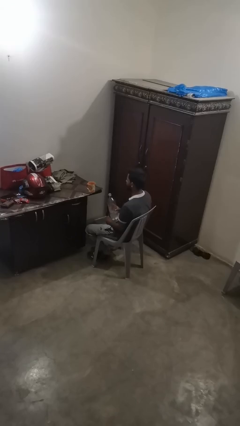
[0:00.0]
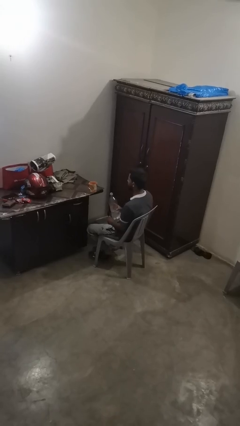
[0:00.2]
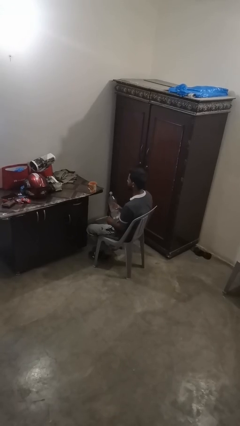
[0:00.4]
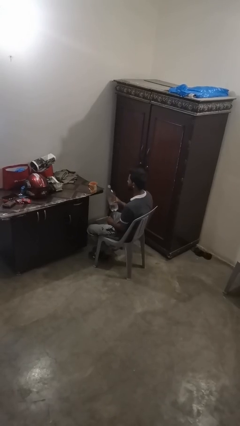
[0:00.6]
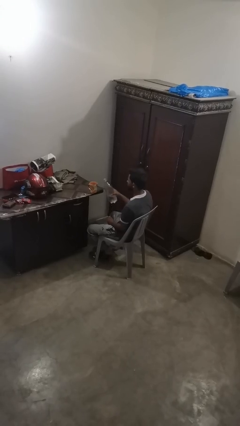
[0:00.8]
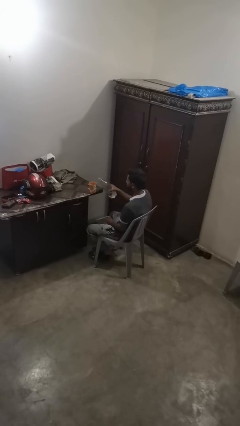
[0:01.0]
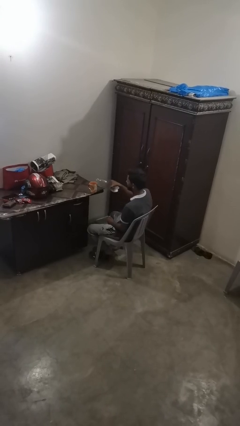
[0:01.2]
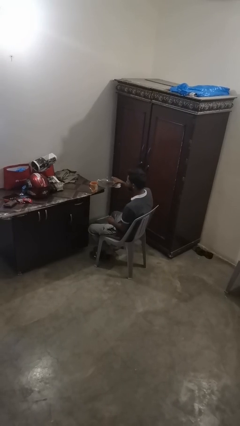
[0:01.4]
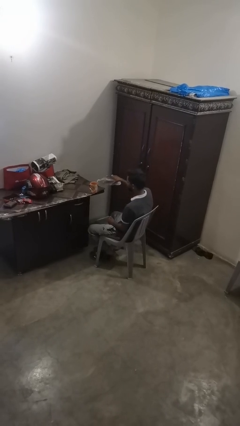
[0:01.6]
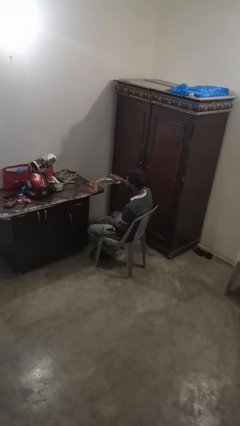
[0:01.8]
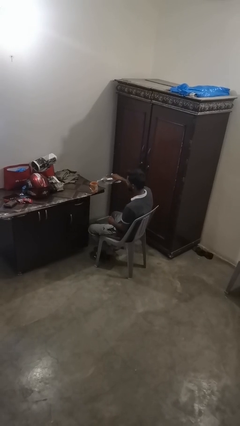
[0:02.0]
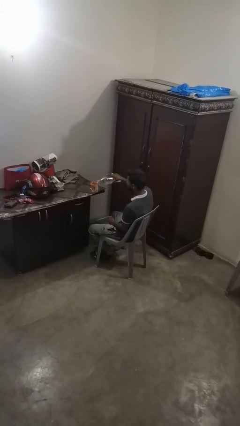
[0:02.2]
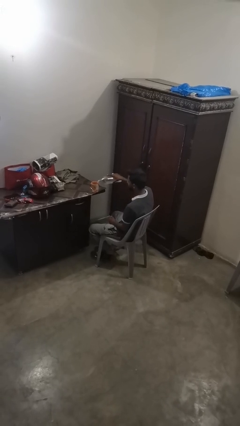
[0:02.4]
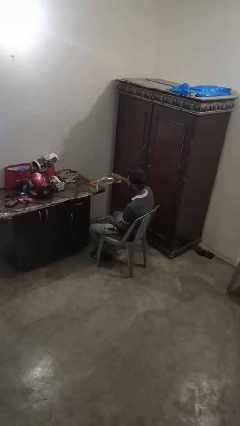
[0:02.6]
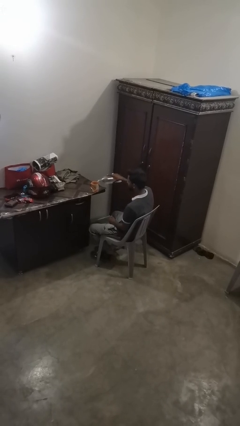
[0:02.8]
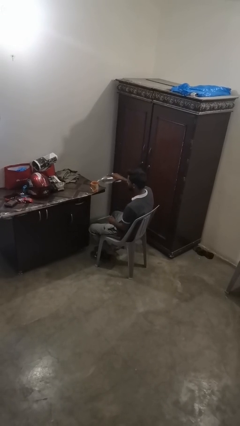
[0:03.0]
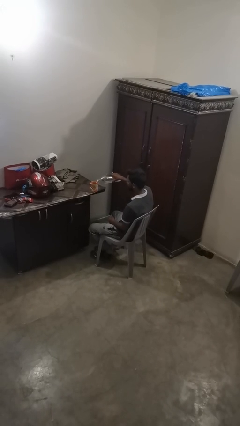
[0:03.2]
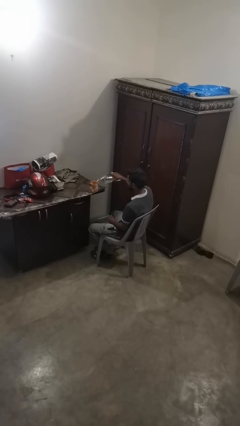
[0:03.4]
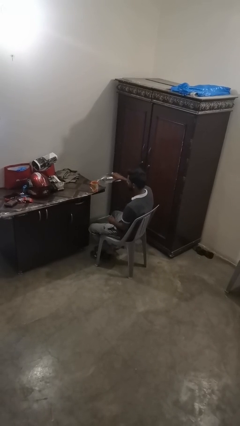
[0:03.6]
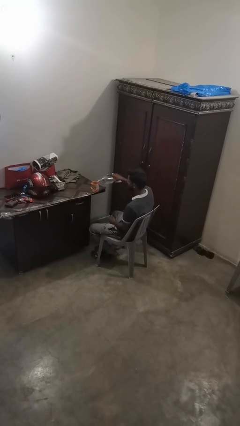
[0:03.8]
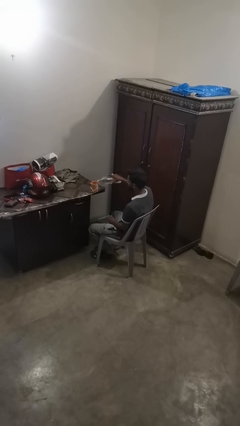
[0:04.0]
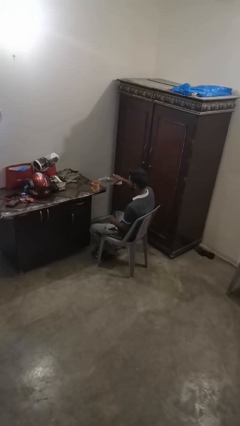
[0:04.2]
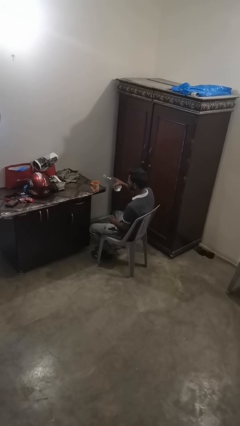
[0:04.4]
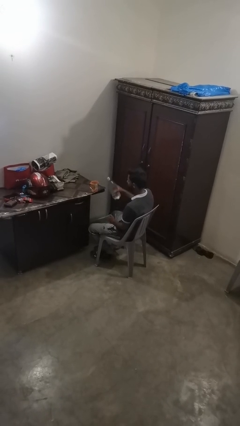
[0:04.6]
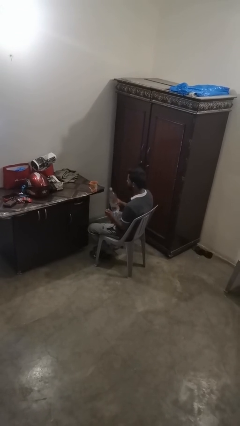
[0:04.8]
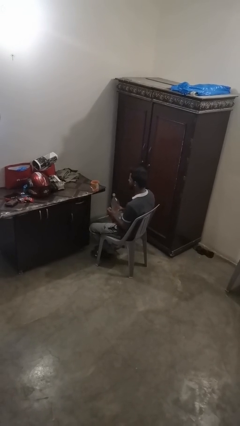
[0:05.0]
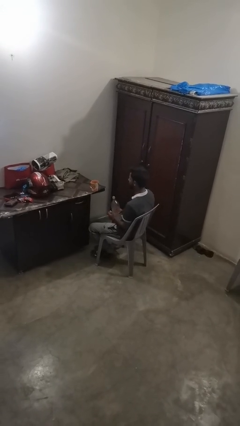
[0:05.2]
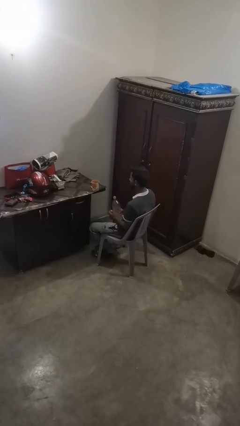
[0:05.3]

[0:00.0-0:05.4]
person pours liquid into cup

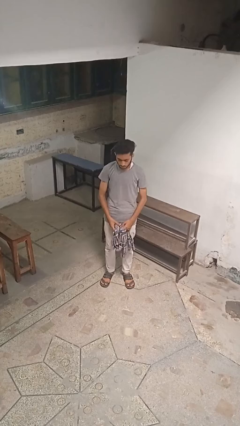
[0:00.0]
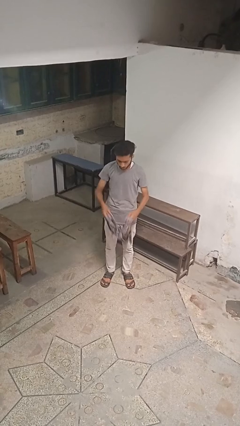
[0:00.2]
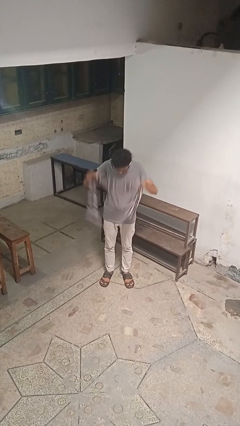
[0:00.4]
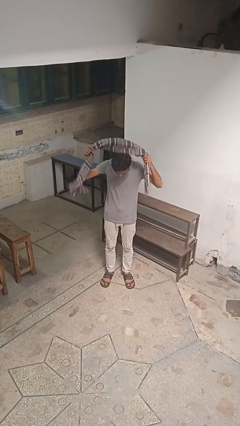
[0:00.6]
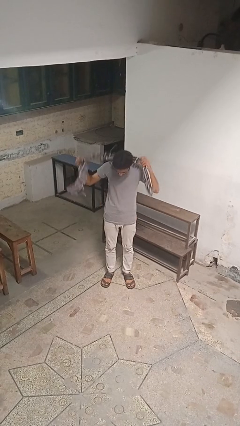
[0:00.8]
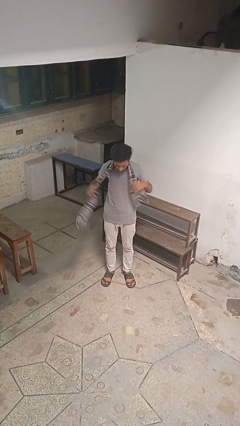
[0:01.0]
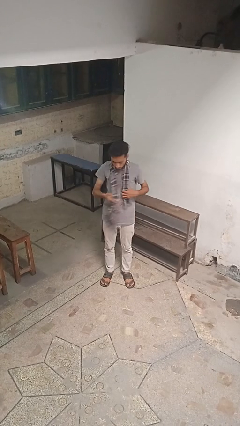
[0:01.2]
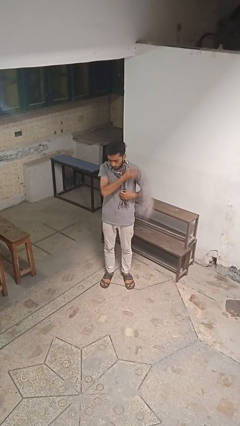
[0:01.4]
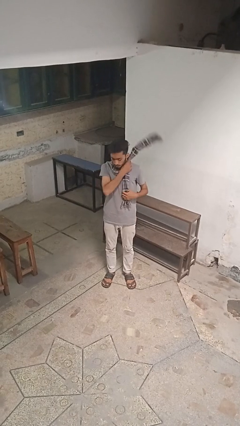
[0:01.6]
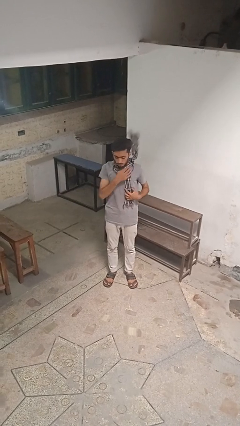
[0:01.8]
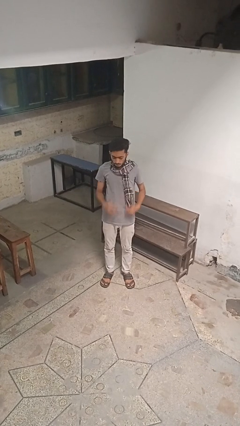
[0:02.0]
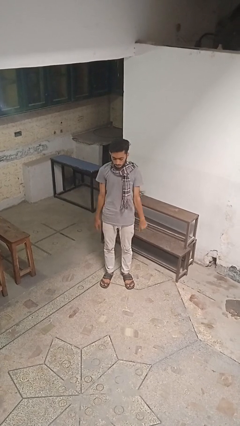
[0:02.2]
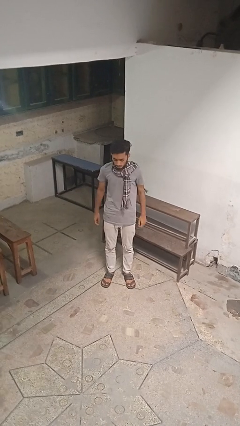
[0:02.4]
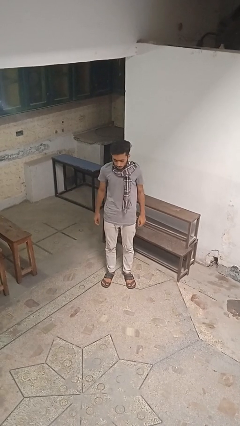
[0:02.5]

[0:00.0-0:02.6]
person puts on scarf

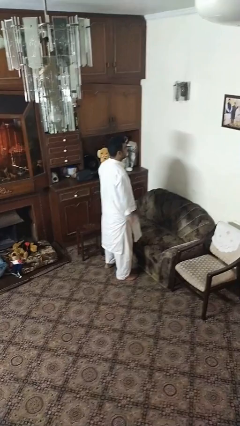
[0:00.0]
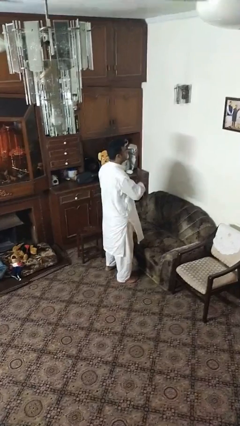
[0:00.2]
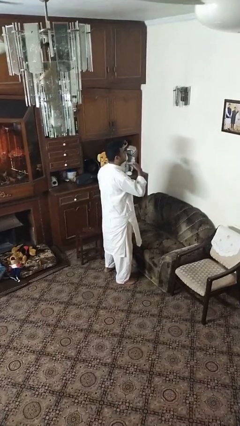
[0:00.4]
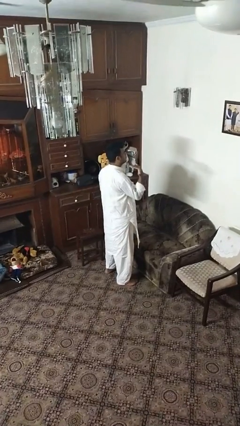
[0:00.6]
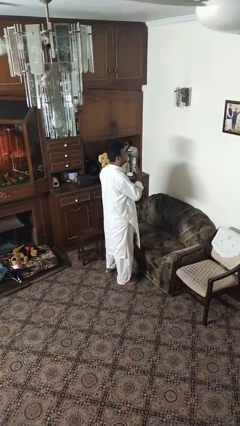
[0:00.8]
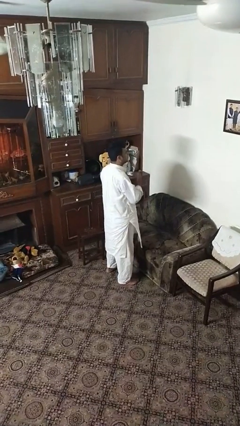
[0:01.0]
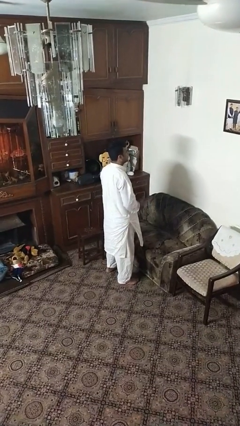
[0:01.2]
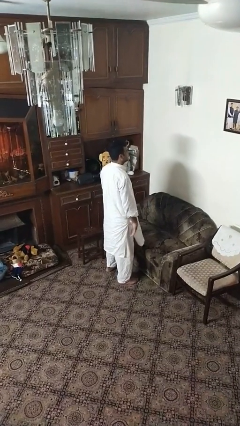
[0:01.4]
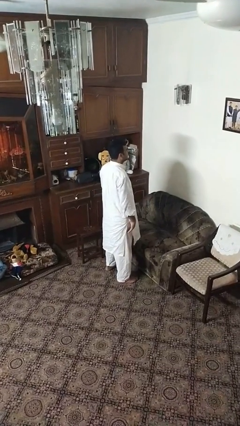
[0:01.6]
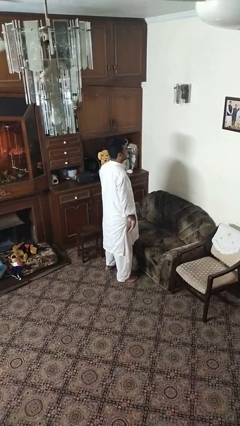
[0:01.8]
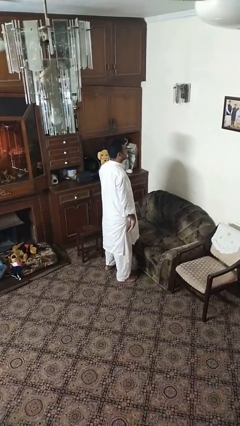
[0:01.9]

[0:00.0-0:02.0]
person gestures cut

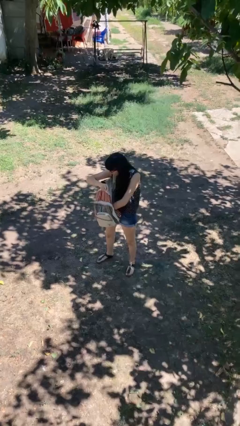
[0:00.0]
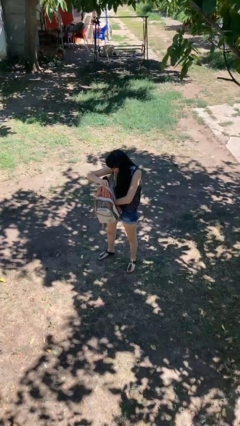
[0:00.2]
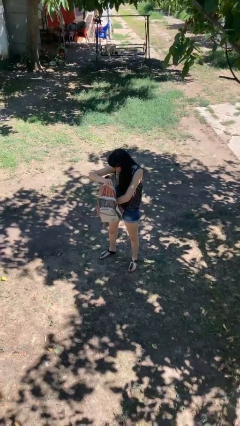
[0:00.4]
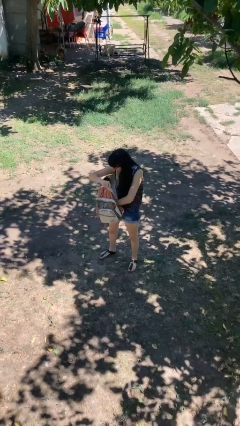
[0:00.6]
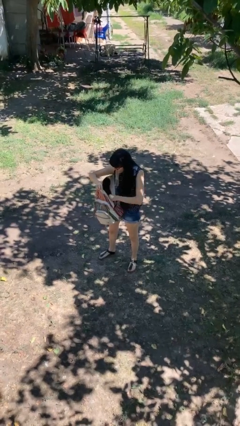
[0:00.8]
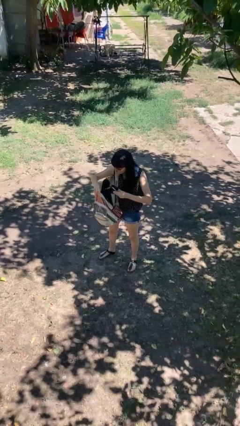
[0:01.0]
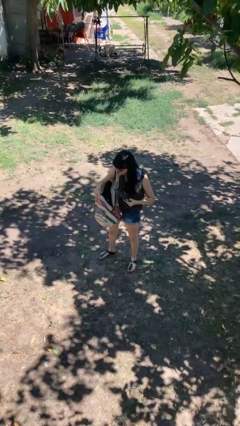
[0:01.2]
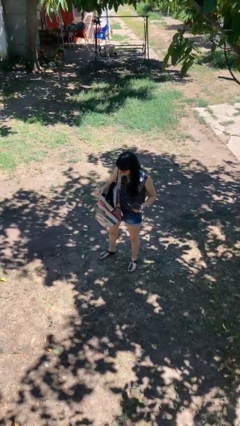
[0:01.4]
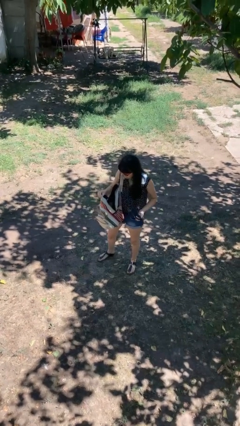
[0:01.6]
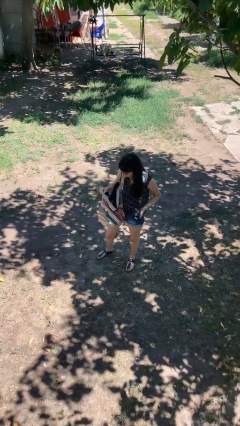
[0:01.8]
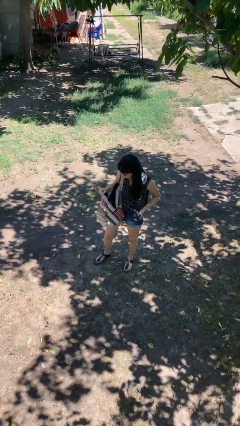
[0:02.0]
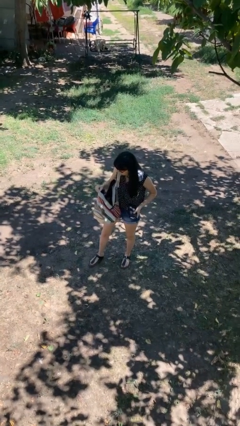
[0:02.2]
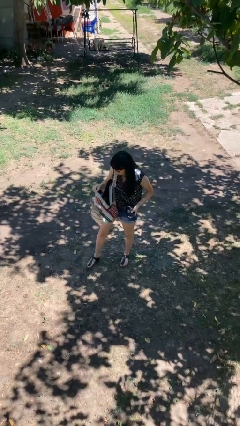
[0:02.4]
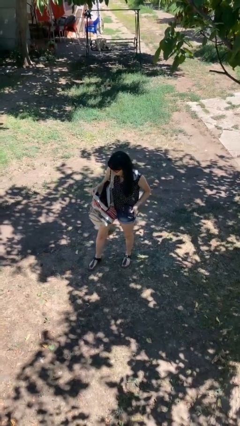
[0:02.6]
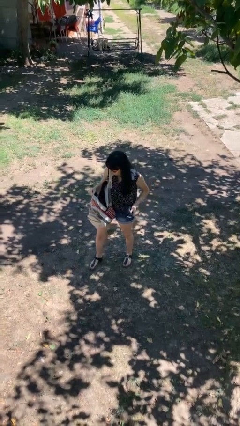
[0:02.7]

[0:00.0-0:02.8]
person takes object from backpack

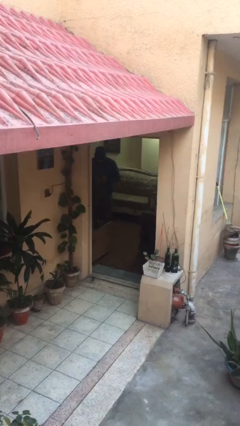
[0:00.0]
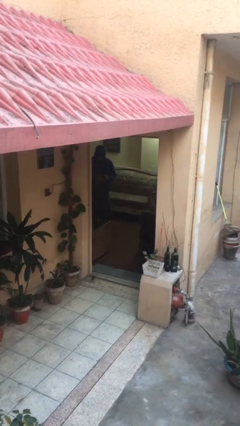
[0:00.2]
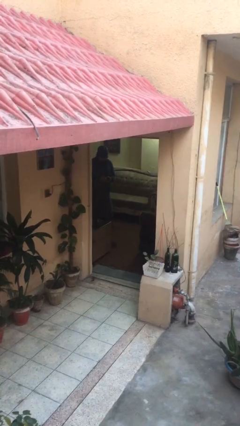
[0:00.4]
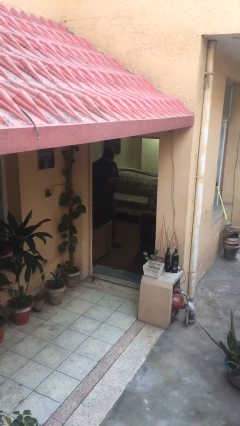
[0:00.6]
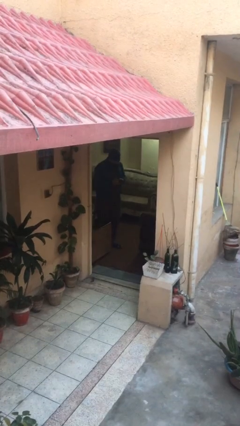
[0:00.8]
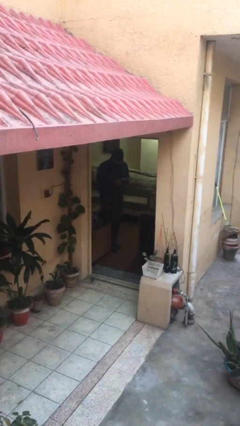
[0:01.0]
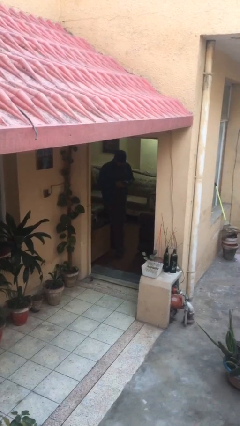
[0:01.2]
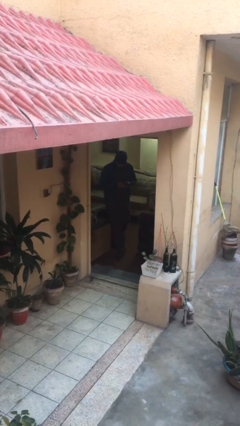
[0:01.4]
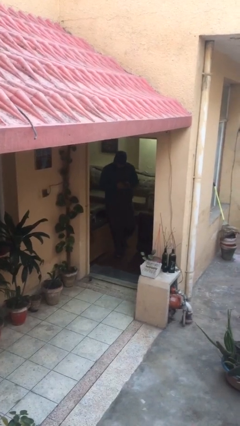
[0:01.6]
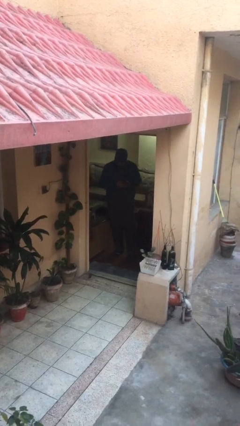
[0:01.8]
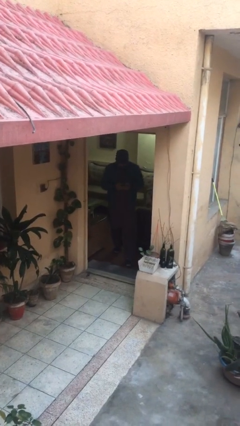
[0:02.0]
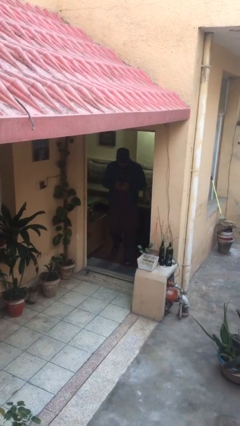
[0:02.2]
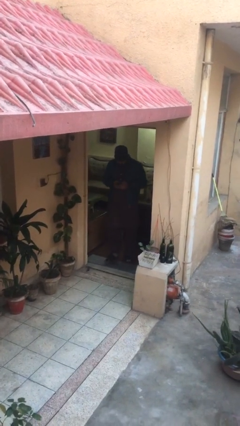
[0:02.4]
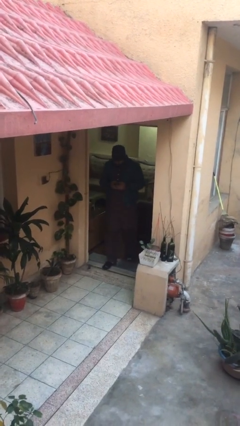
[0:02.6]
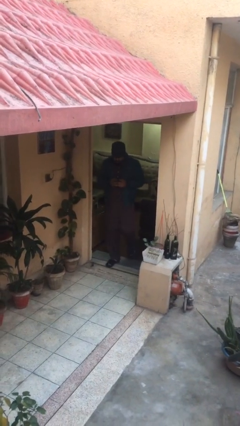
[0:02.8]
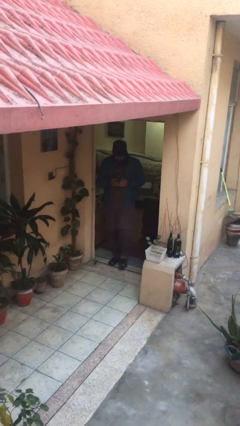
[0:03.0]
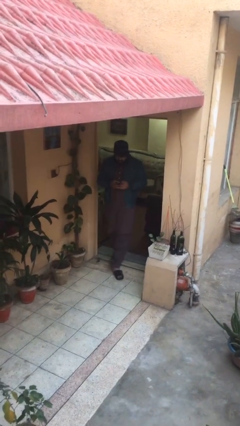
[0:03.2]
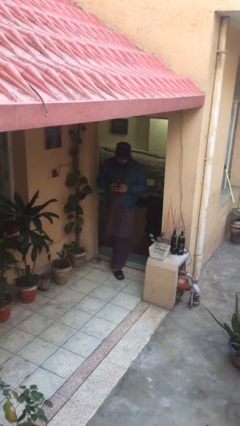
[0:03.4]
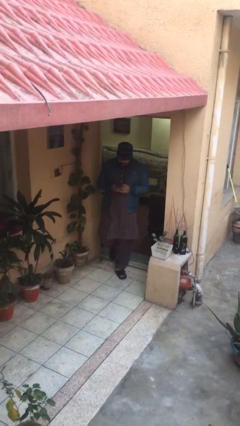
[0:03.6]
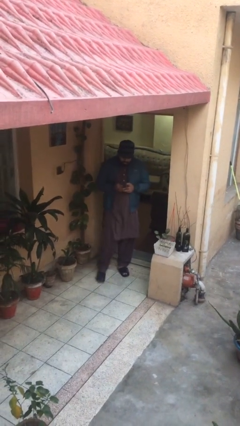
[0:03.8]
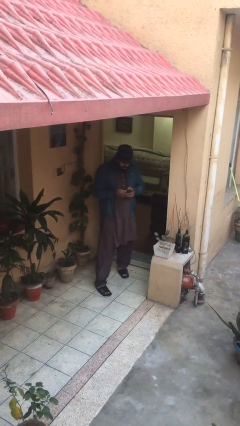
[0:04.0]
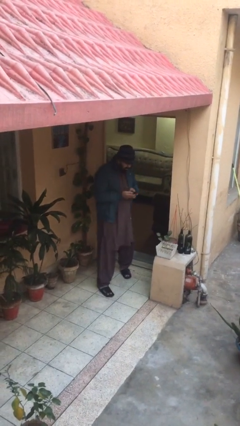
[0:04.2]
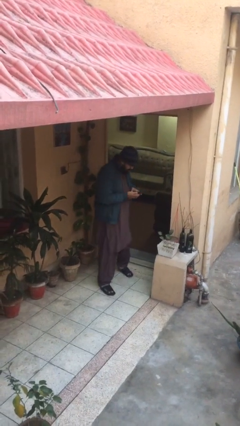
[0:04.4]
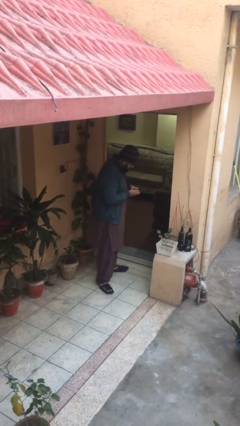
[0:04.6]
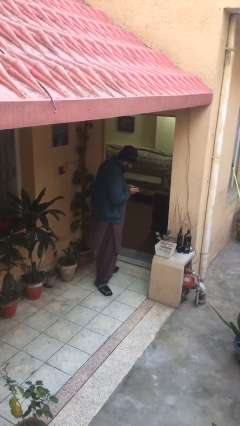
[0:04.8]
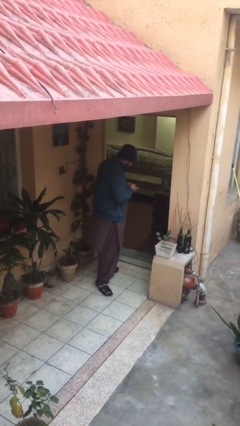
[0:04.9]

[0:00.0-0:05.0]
person enters scene through structure
